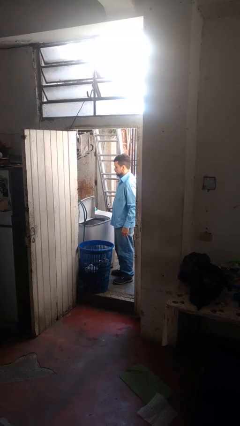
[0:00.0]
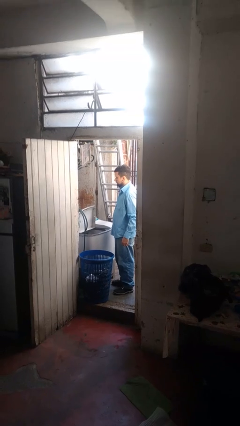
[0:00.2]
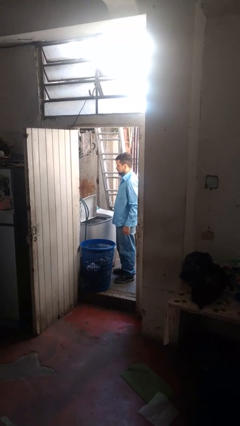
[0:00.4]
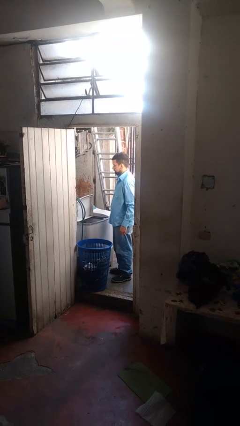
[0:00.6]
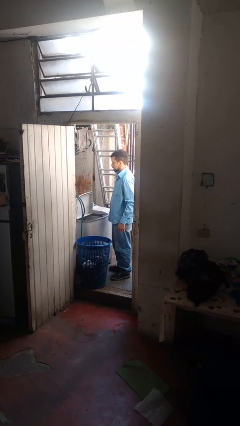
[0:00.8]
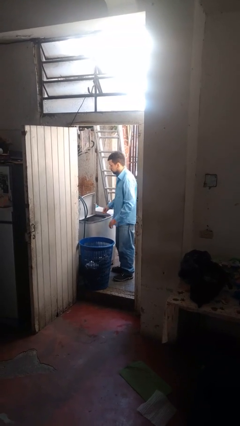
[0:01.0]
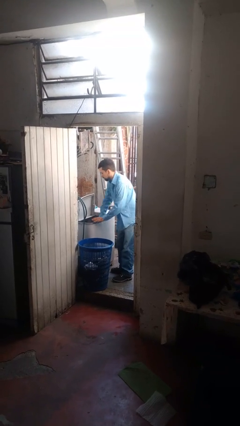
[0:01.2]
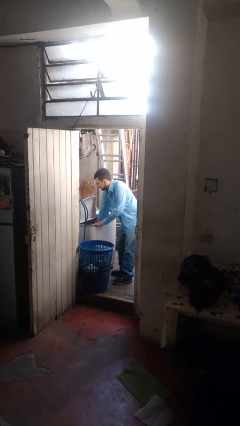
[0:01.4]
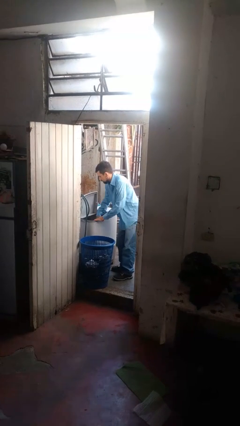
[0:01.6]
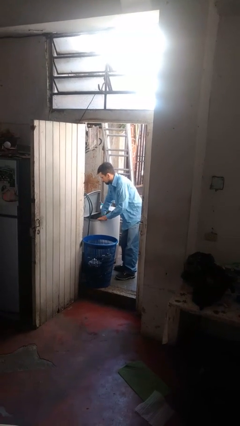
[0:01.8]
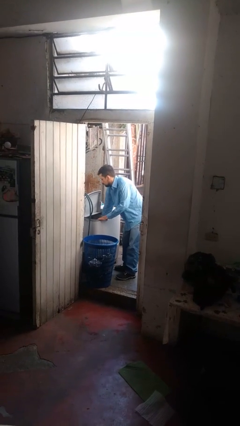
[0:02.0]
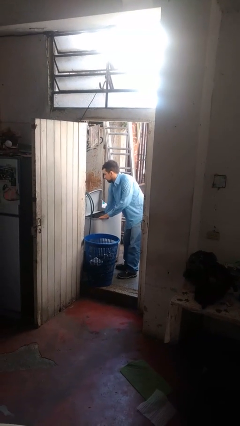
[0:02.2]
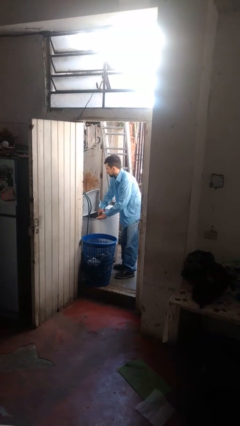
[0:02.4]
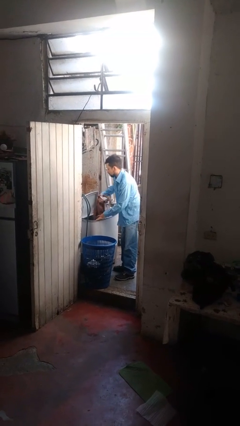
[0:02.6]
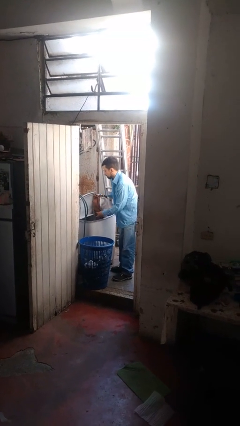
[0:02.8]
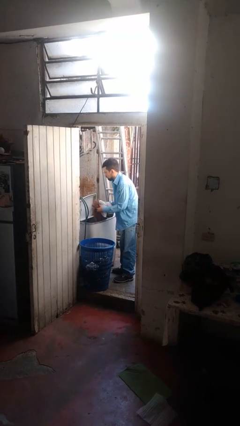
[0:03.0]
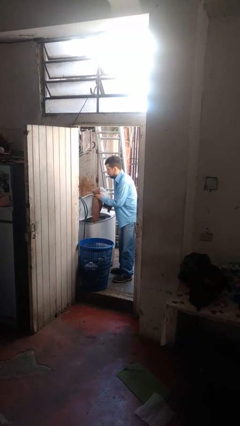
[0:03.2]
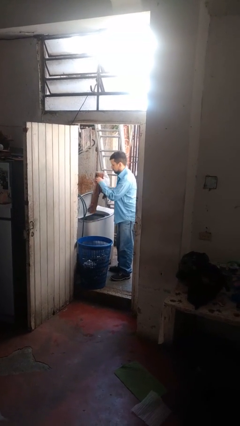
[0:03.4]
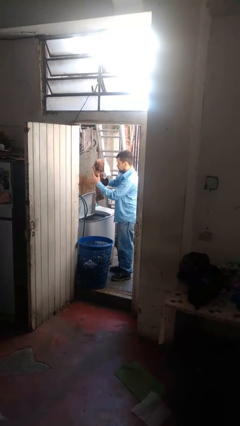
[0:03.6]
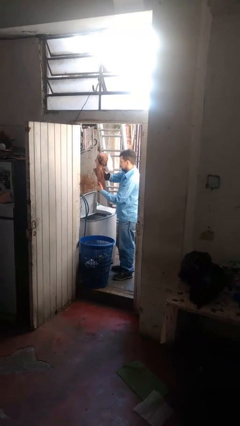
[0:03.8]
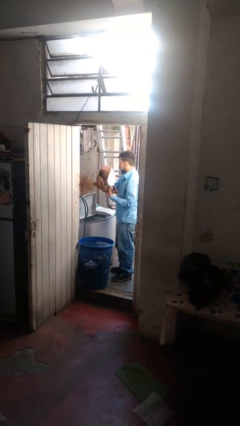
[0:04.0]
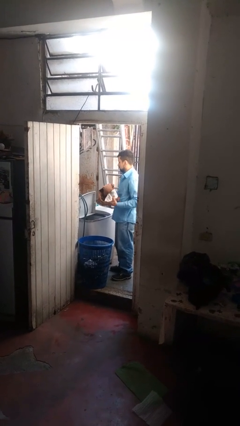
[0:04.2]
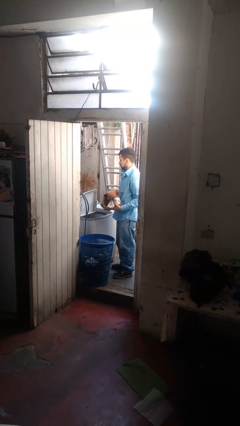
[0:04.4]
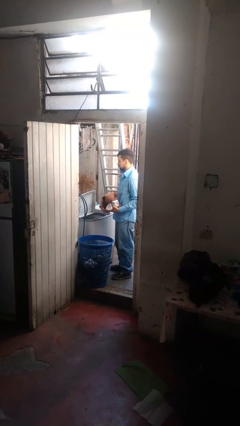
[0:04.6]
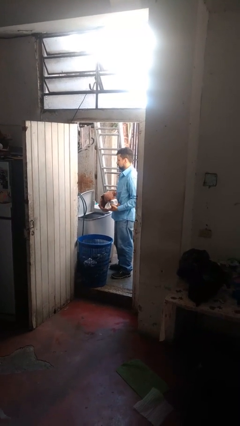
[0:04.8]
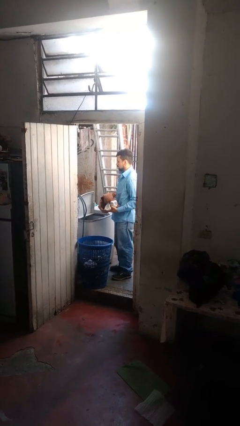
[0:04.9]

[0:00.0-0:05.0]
person unloads clotheswasher

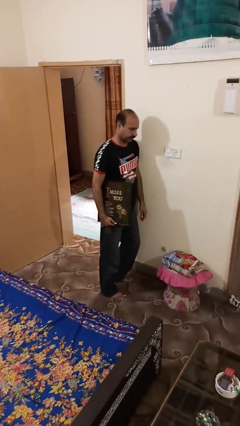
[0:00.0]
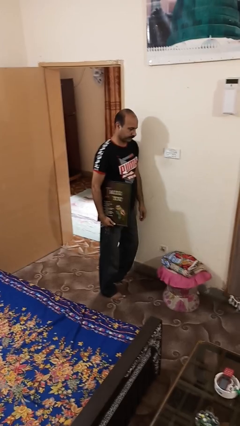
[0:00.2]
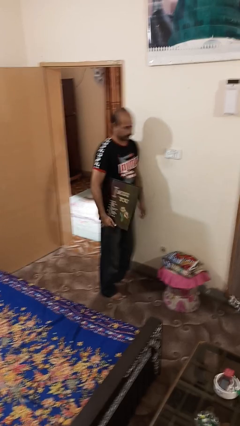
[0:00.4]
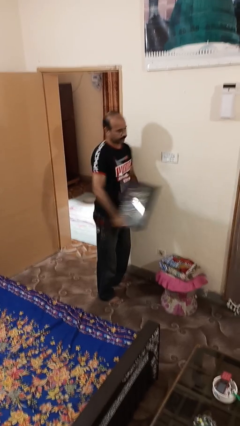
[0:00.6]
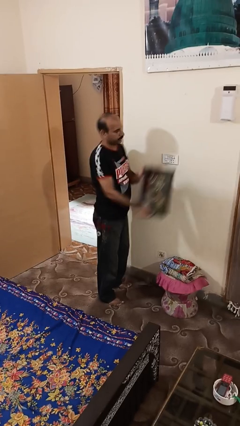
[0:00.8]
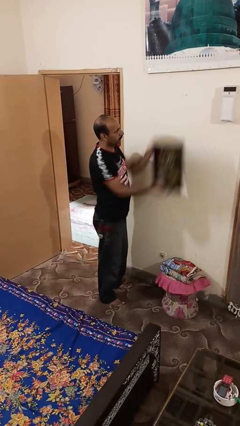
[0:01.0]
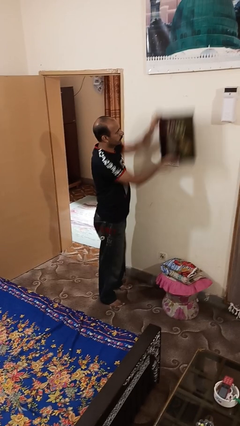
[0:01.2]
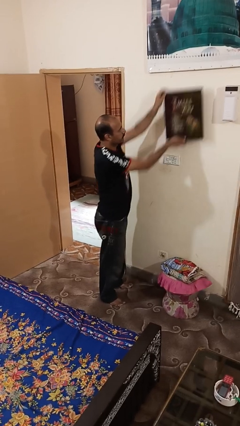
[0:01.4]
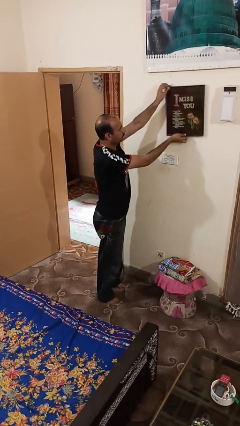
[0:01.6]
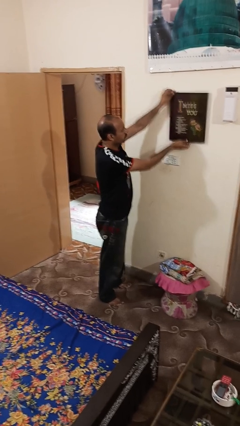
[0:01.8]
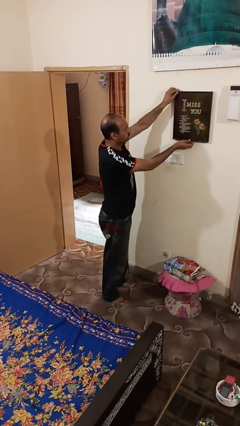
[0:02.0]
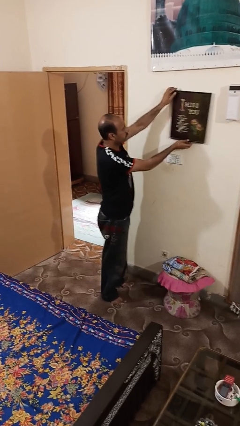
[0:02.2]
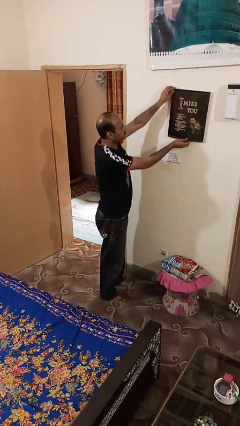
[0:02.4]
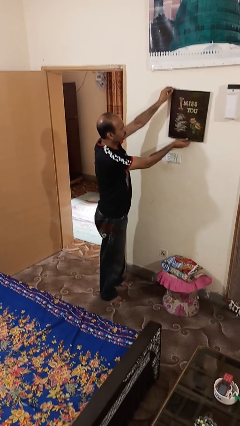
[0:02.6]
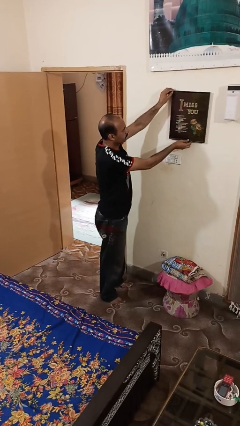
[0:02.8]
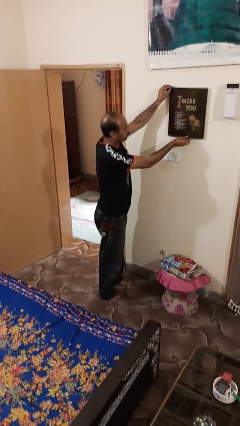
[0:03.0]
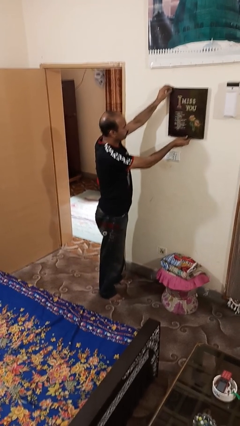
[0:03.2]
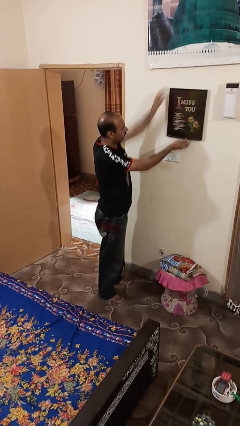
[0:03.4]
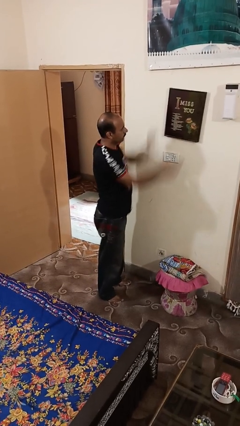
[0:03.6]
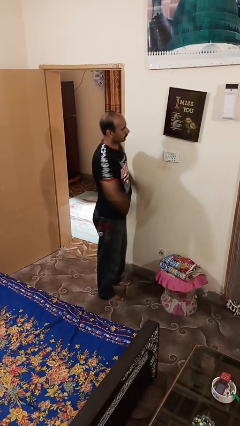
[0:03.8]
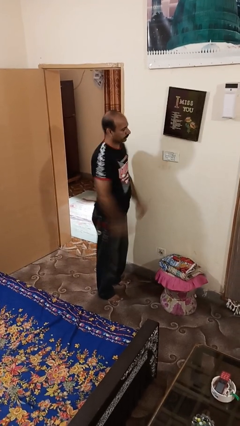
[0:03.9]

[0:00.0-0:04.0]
person puts up picture frame

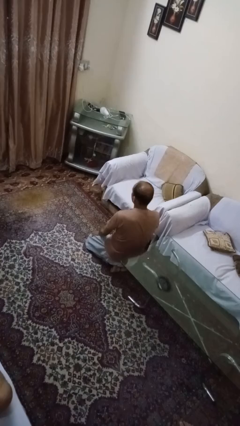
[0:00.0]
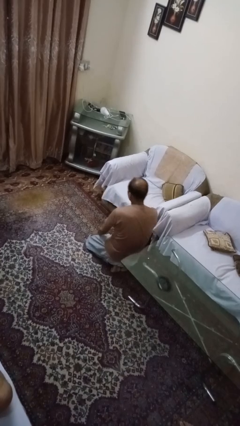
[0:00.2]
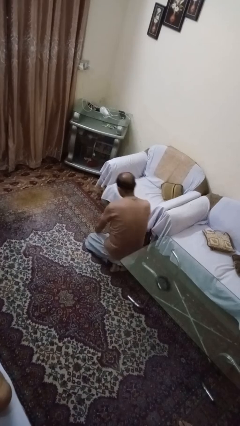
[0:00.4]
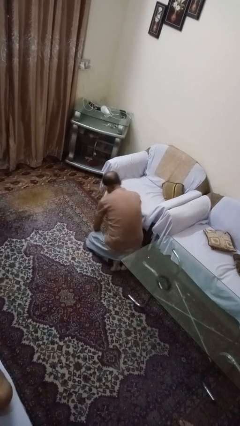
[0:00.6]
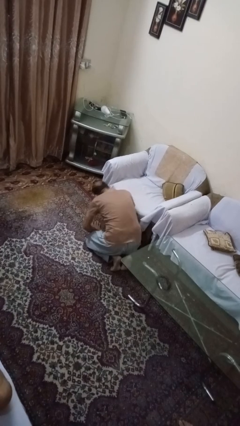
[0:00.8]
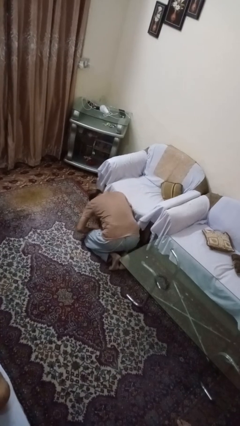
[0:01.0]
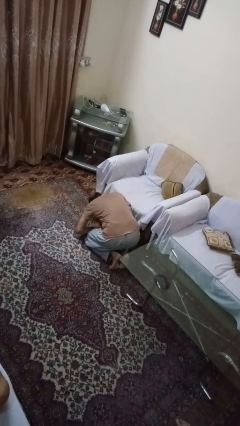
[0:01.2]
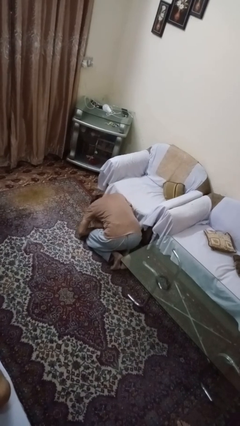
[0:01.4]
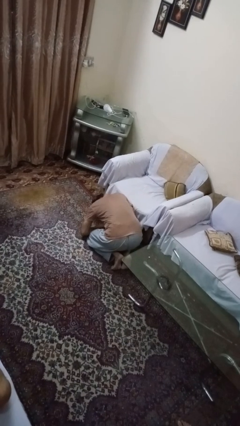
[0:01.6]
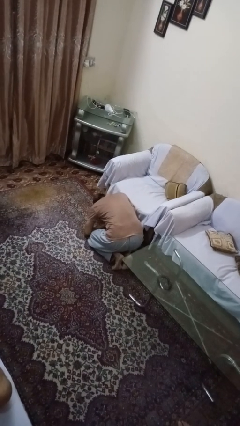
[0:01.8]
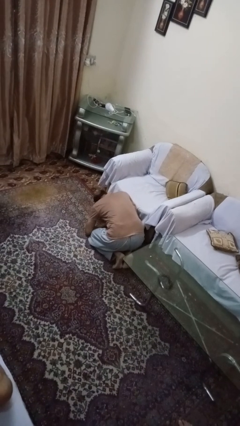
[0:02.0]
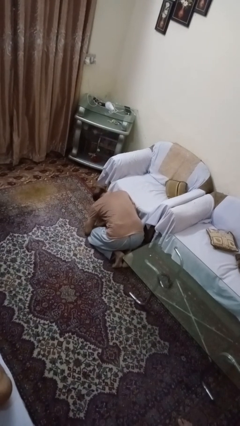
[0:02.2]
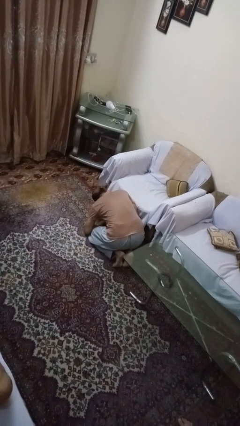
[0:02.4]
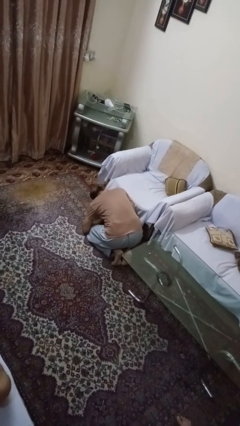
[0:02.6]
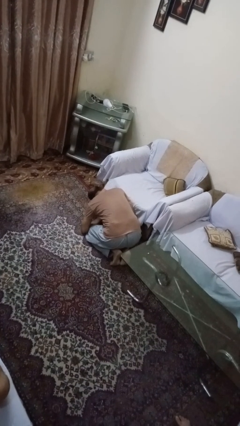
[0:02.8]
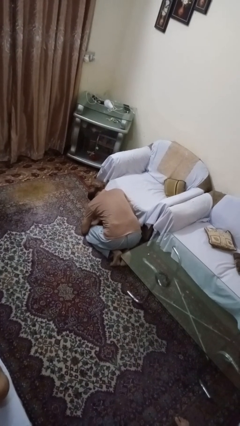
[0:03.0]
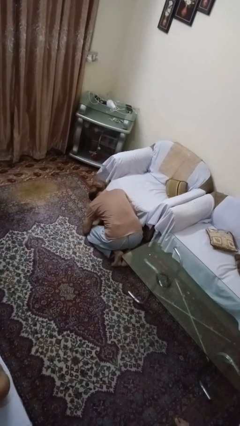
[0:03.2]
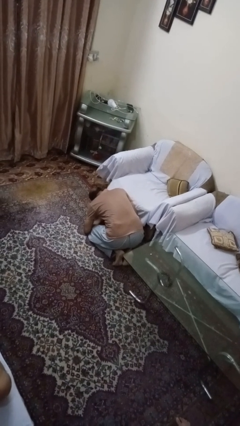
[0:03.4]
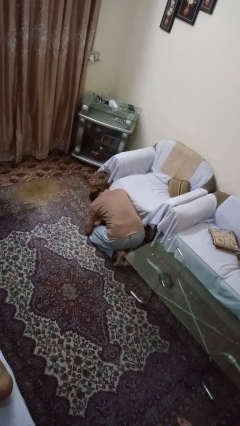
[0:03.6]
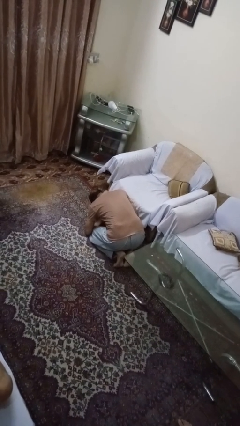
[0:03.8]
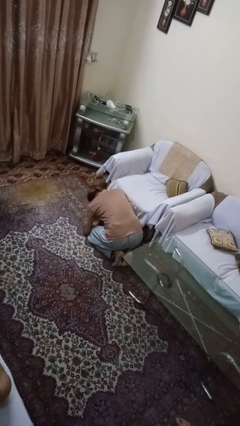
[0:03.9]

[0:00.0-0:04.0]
person searches under couch

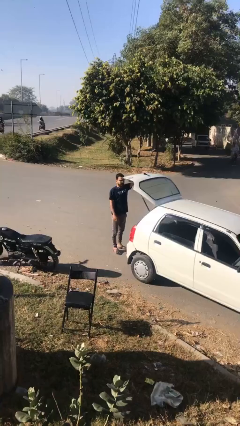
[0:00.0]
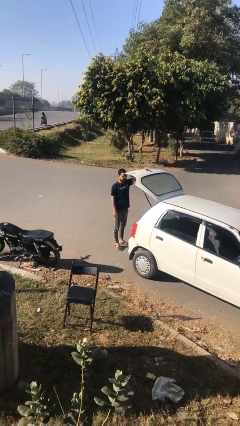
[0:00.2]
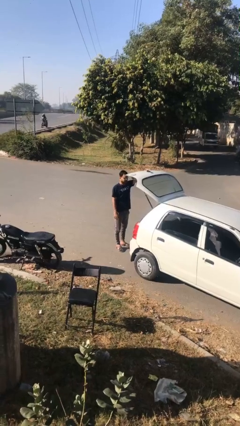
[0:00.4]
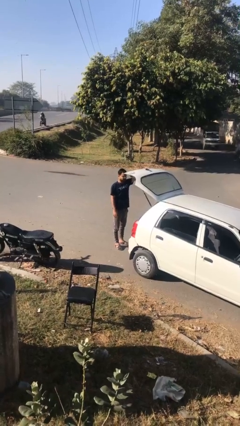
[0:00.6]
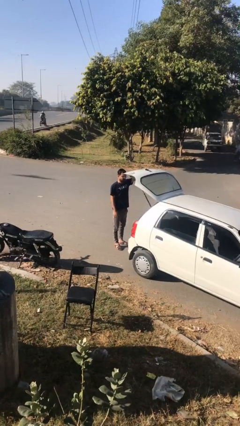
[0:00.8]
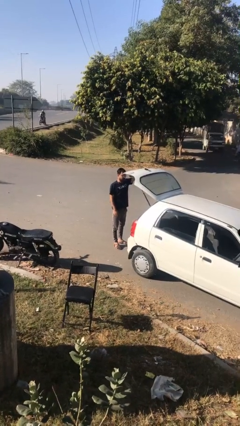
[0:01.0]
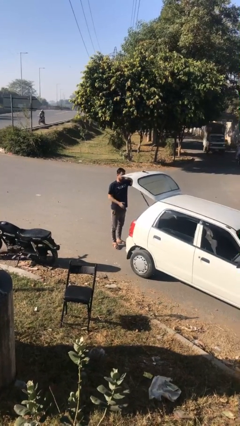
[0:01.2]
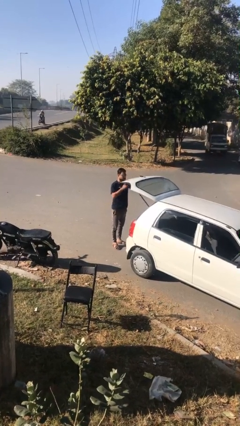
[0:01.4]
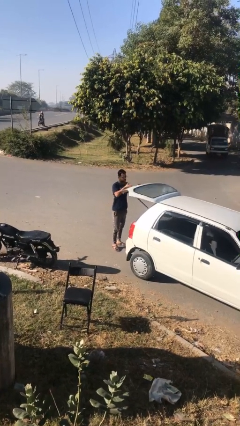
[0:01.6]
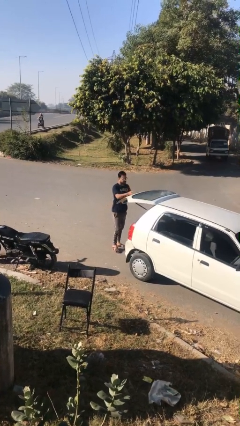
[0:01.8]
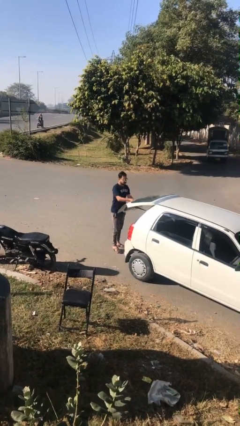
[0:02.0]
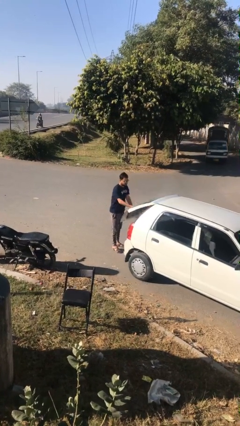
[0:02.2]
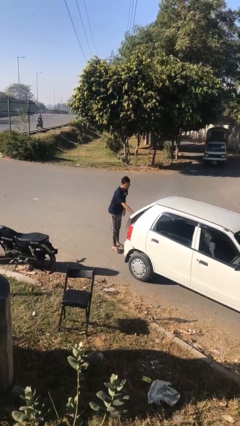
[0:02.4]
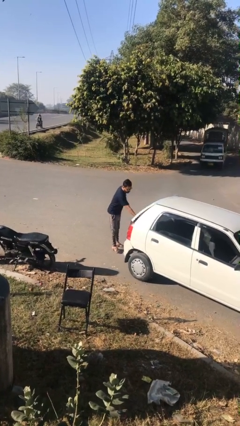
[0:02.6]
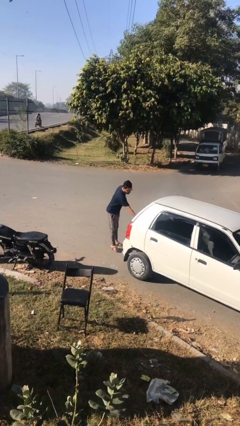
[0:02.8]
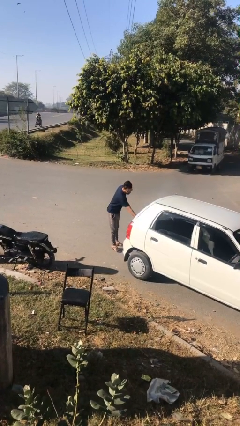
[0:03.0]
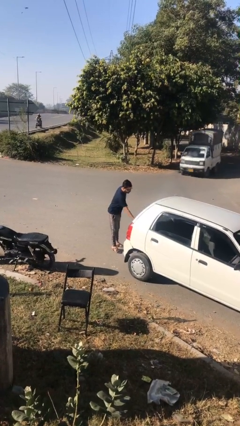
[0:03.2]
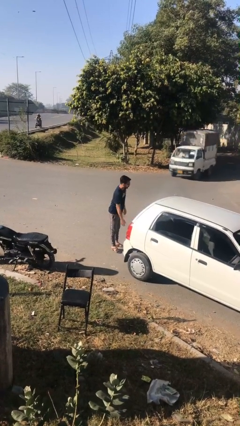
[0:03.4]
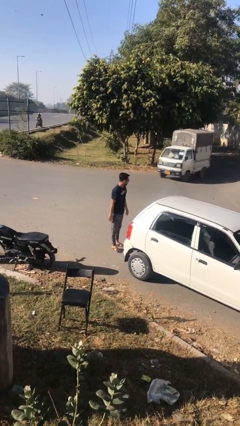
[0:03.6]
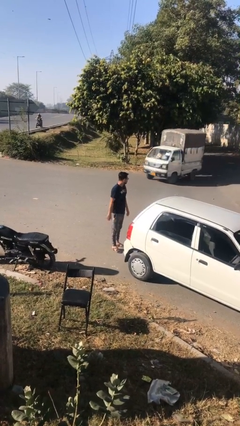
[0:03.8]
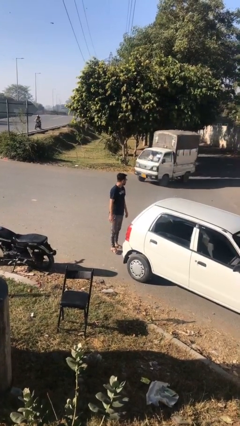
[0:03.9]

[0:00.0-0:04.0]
person closes car trunk

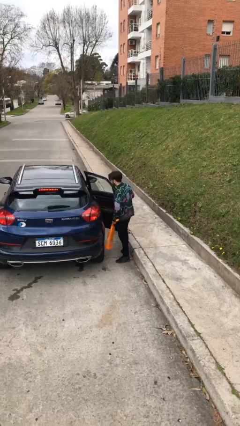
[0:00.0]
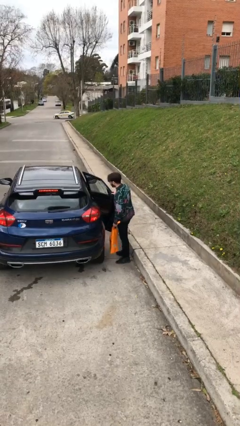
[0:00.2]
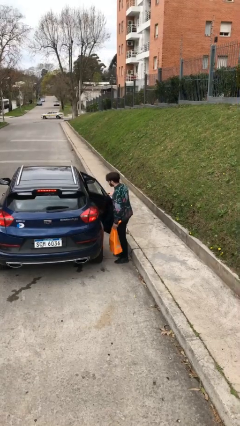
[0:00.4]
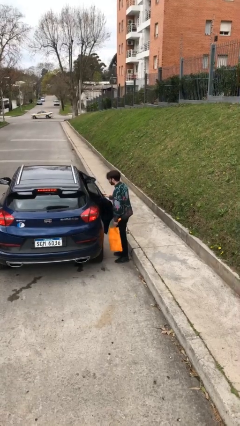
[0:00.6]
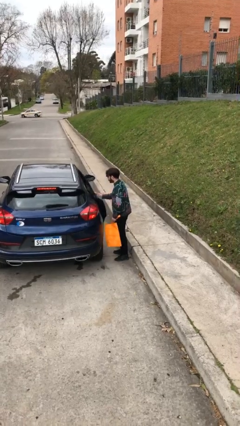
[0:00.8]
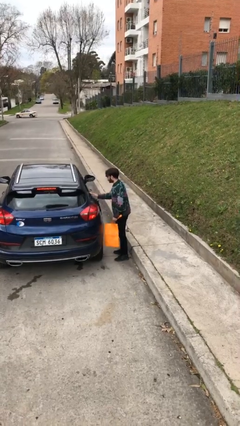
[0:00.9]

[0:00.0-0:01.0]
person closes car door
